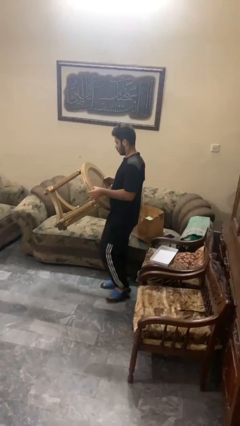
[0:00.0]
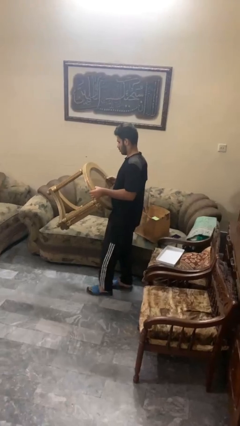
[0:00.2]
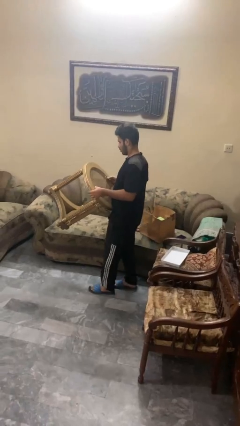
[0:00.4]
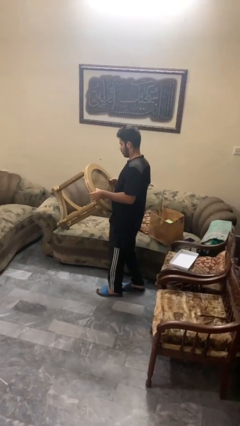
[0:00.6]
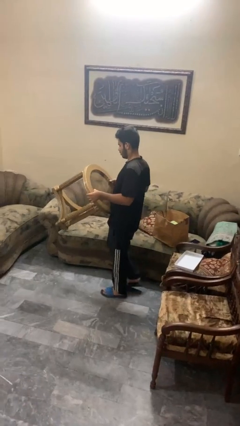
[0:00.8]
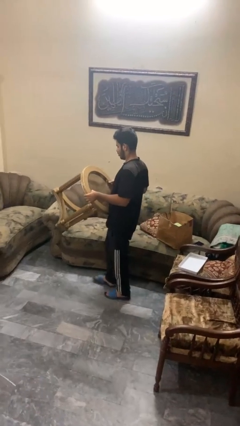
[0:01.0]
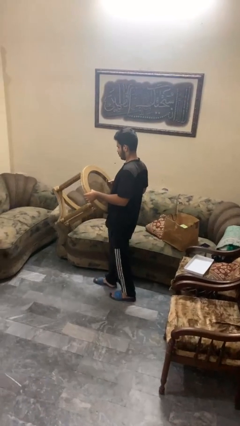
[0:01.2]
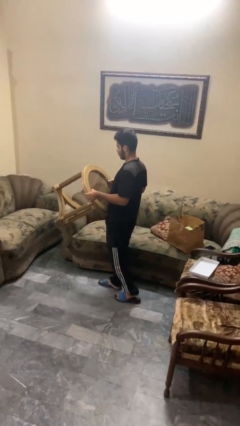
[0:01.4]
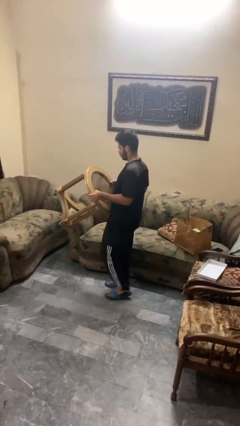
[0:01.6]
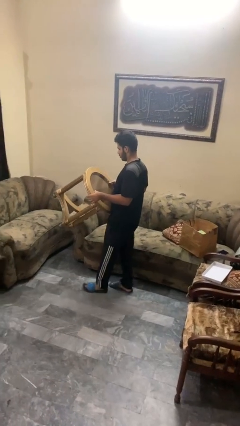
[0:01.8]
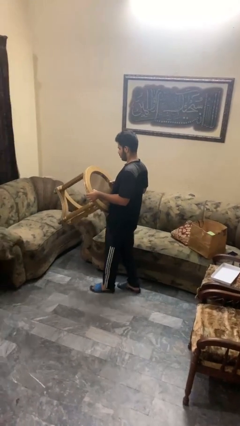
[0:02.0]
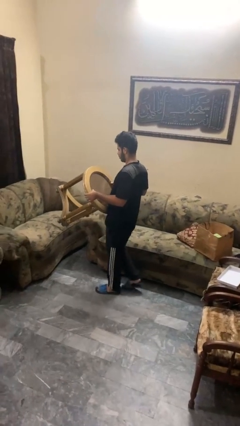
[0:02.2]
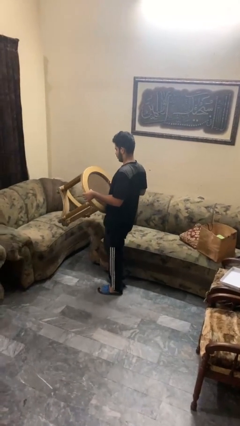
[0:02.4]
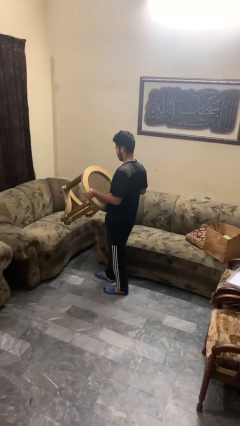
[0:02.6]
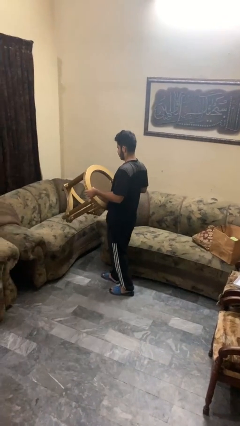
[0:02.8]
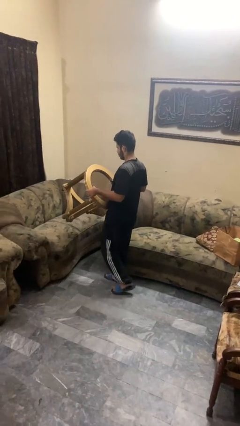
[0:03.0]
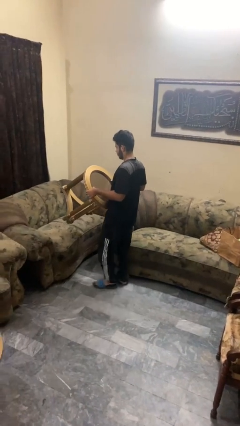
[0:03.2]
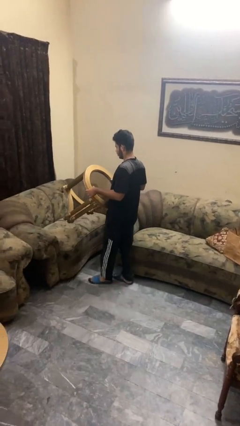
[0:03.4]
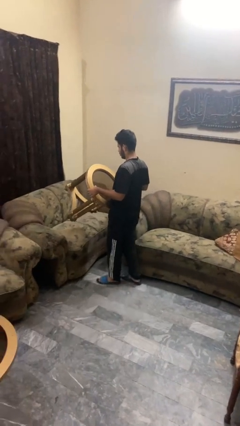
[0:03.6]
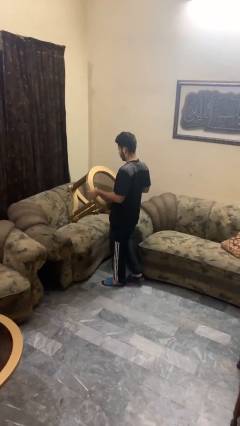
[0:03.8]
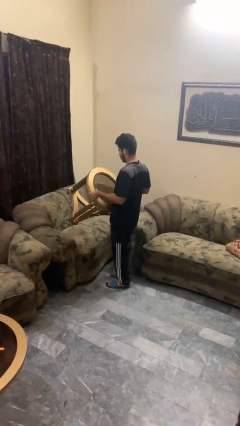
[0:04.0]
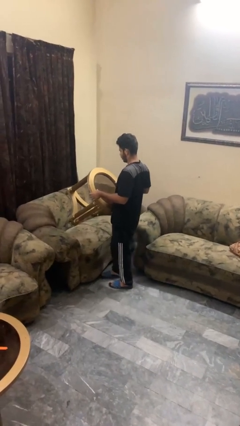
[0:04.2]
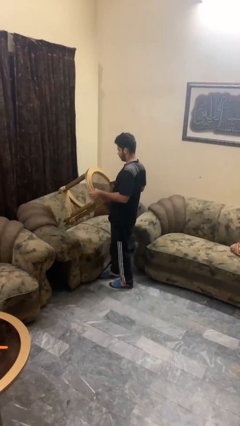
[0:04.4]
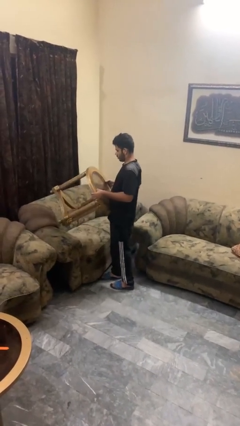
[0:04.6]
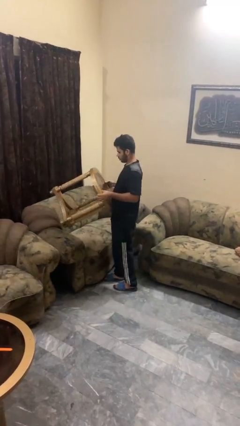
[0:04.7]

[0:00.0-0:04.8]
person carries furniture

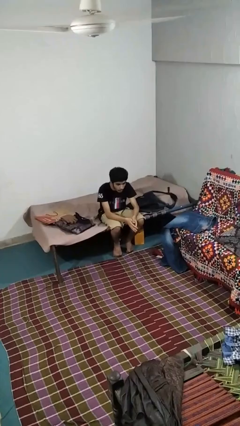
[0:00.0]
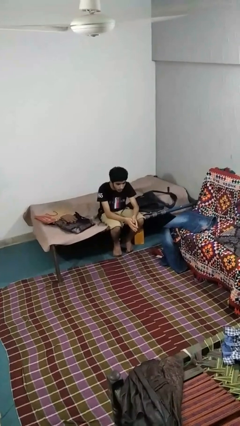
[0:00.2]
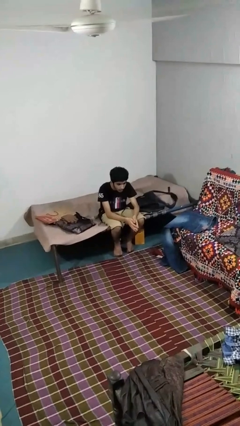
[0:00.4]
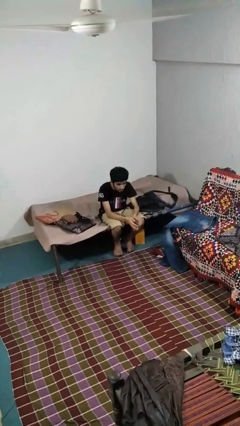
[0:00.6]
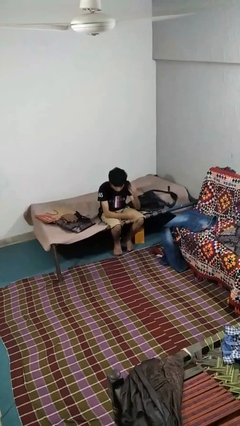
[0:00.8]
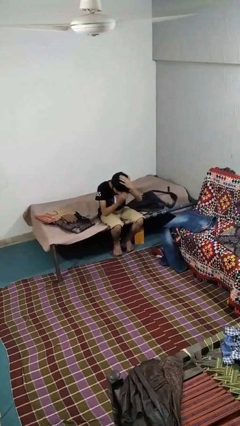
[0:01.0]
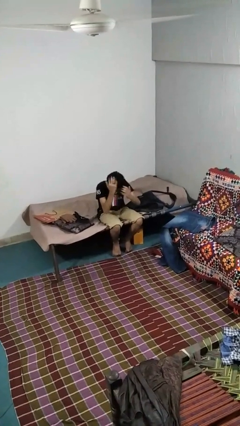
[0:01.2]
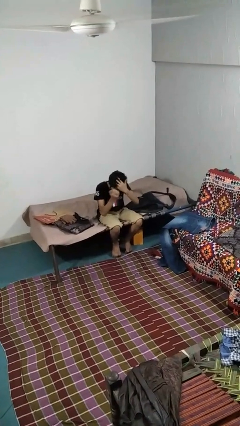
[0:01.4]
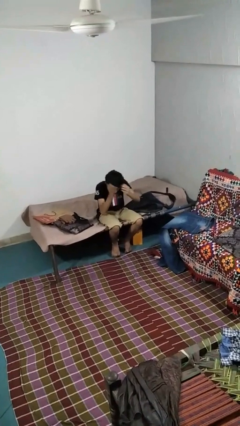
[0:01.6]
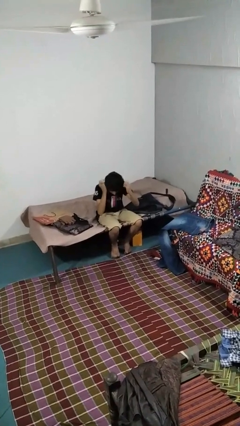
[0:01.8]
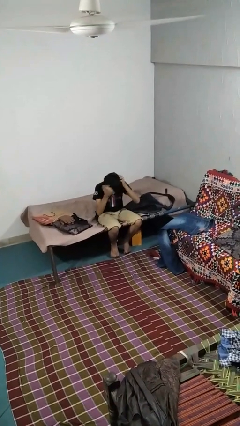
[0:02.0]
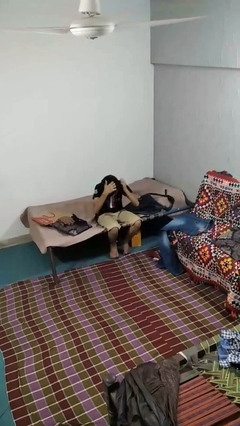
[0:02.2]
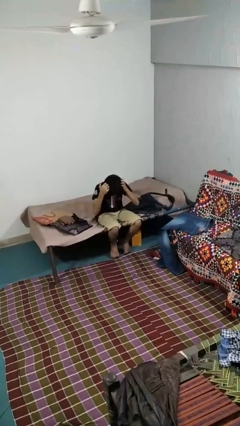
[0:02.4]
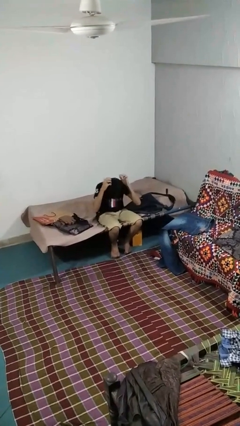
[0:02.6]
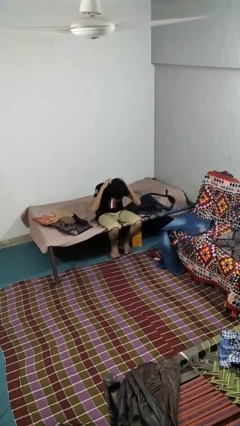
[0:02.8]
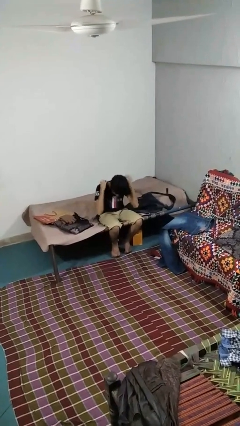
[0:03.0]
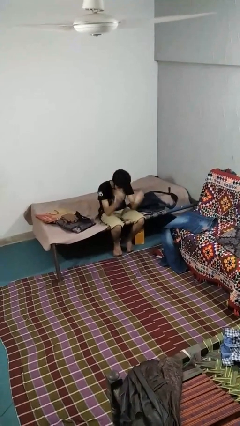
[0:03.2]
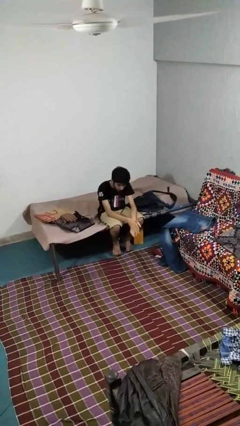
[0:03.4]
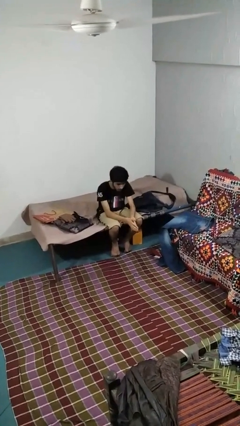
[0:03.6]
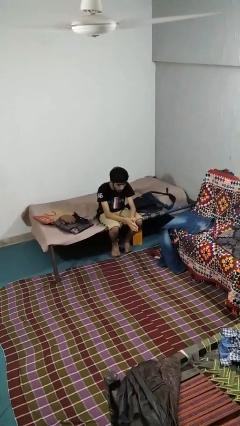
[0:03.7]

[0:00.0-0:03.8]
person strokes hair

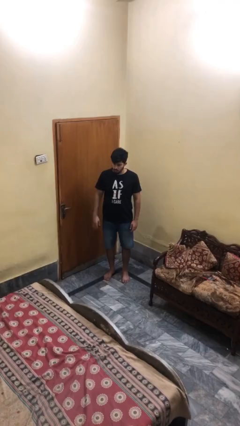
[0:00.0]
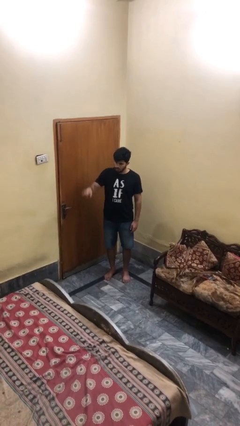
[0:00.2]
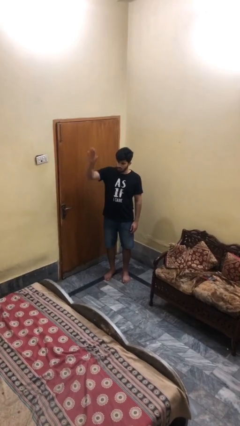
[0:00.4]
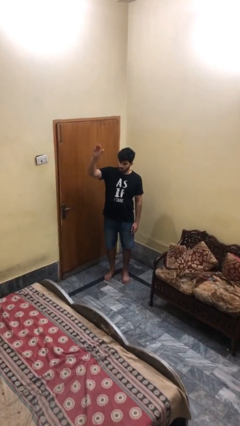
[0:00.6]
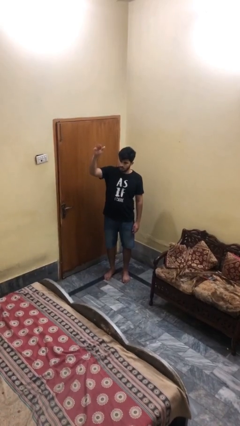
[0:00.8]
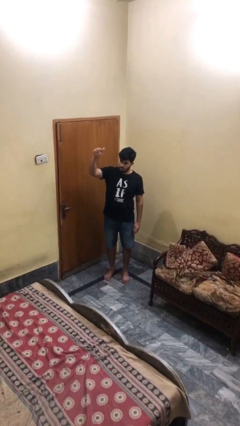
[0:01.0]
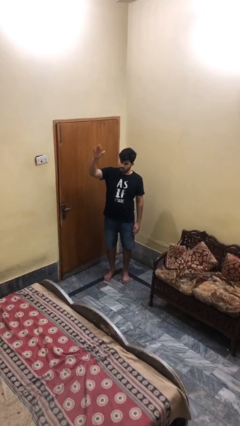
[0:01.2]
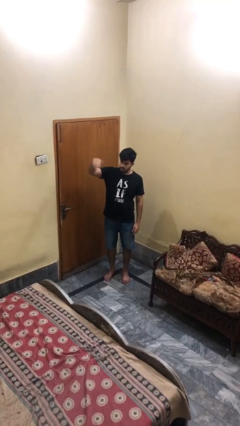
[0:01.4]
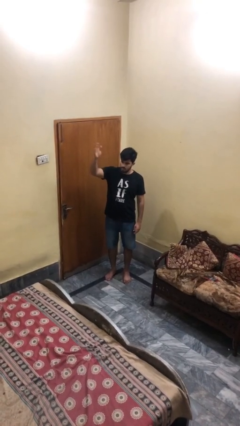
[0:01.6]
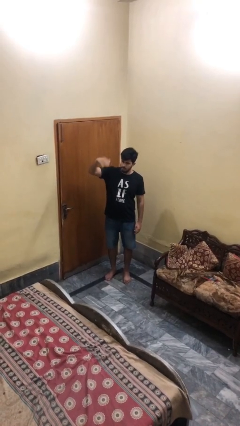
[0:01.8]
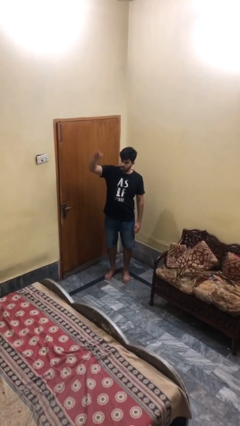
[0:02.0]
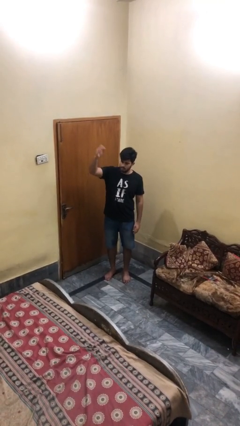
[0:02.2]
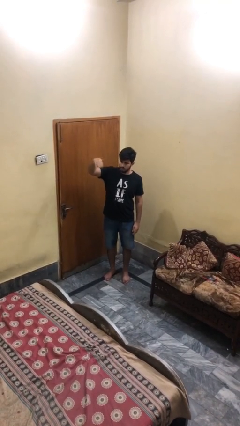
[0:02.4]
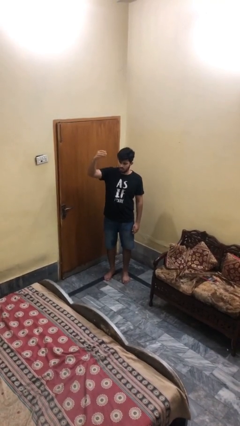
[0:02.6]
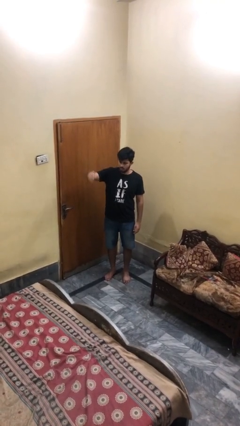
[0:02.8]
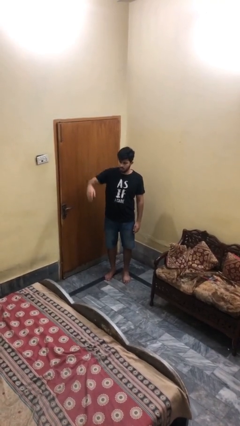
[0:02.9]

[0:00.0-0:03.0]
person gestures come here

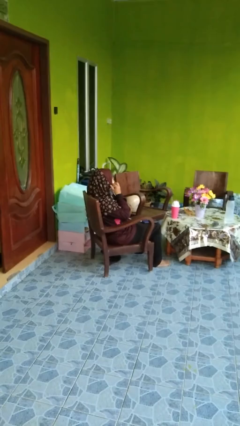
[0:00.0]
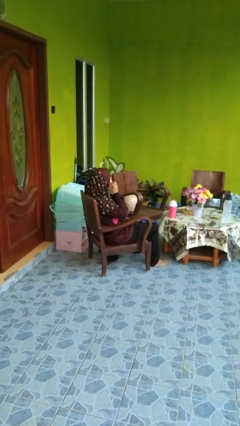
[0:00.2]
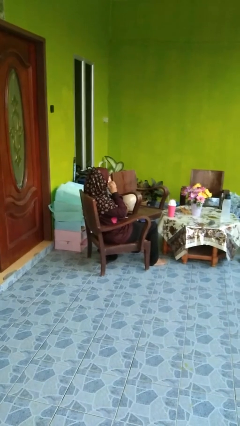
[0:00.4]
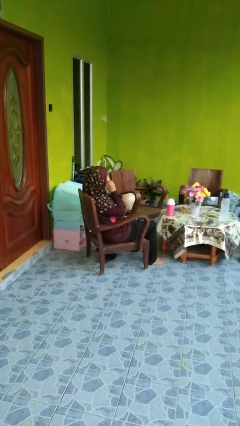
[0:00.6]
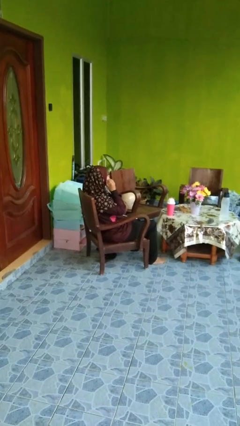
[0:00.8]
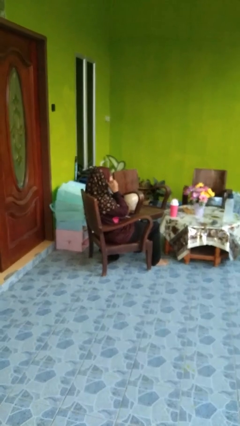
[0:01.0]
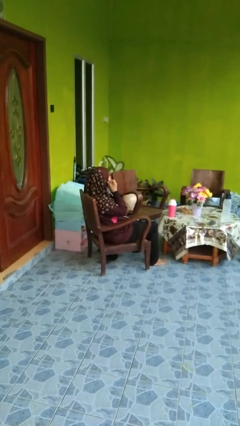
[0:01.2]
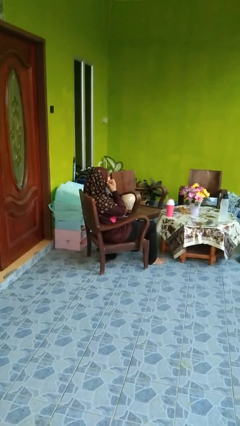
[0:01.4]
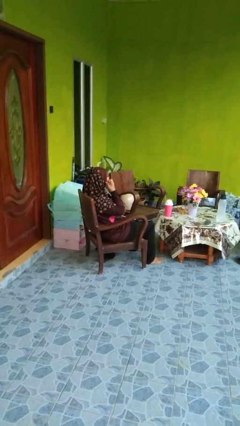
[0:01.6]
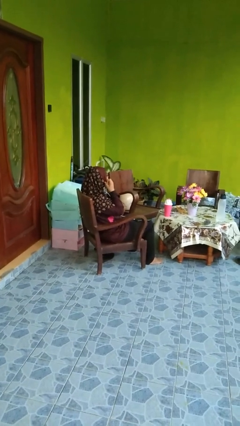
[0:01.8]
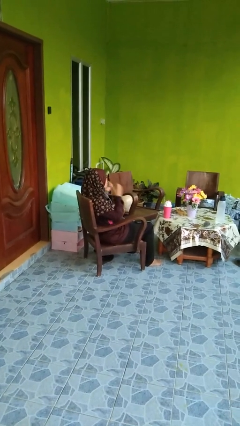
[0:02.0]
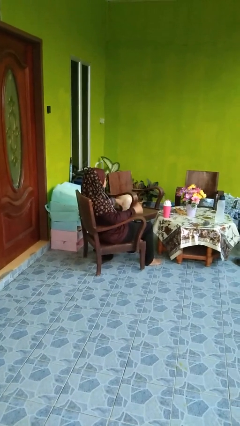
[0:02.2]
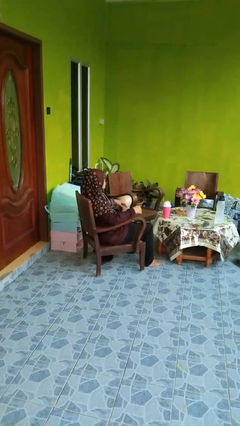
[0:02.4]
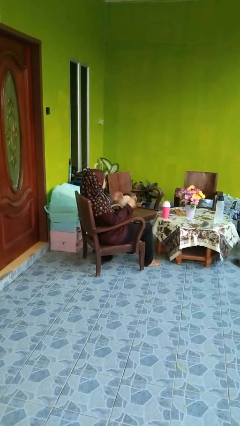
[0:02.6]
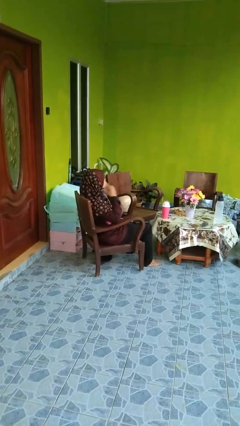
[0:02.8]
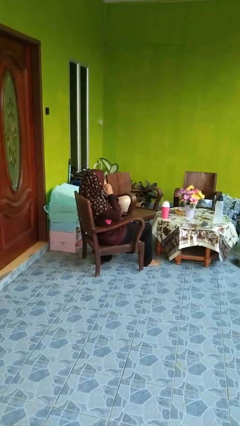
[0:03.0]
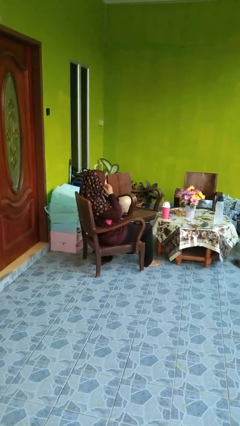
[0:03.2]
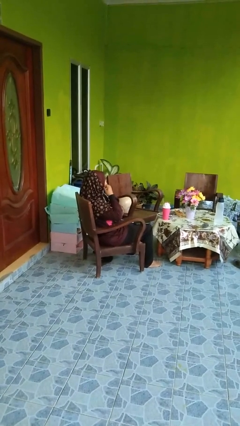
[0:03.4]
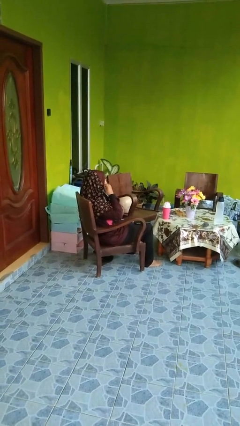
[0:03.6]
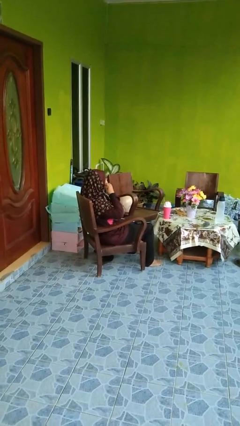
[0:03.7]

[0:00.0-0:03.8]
person puts on headphones

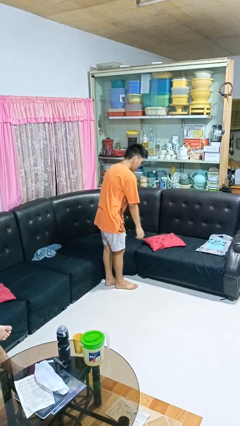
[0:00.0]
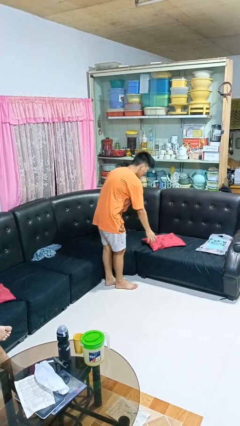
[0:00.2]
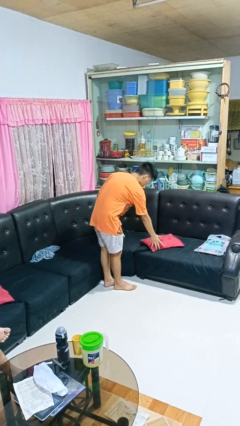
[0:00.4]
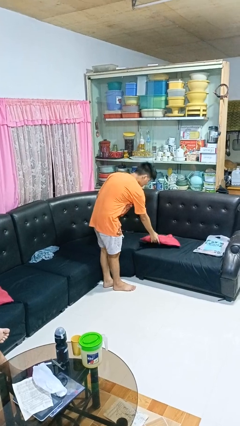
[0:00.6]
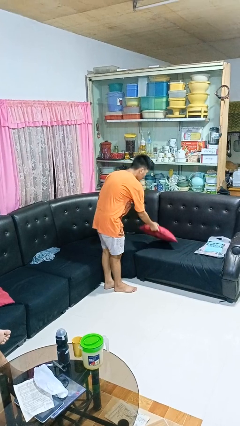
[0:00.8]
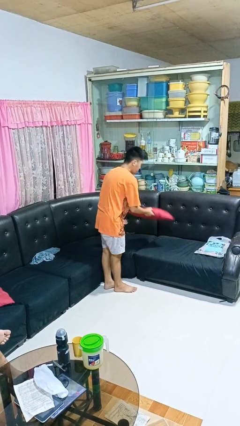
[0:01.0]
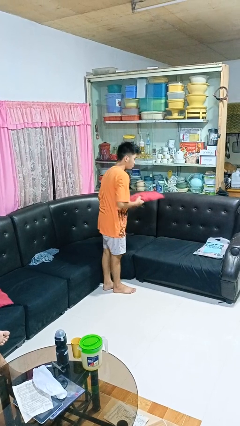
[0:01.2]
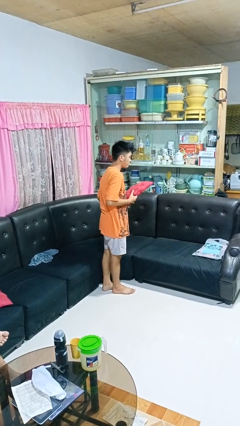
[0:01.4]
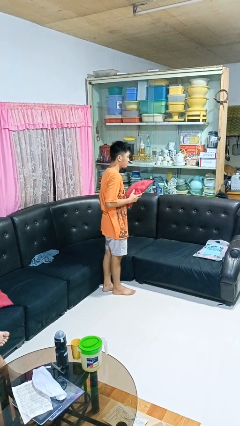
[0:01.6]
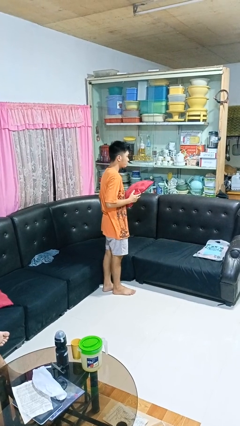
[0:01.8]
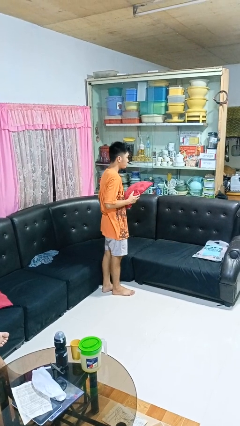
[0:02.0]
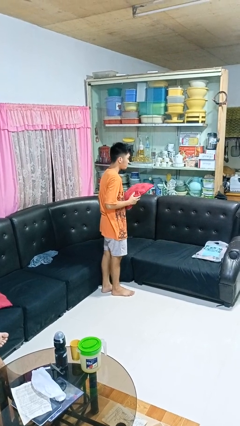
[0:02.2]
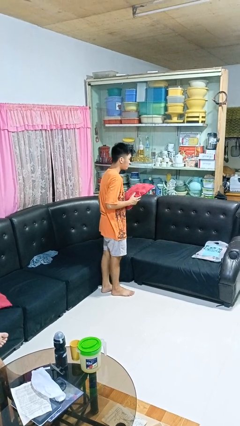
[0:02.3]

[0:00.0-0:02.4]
person picks up object from couch
